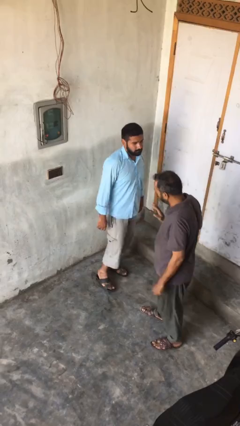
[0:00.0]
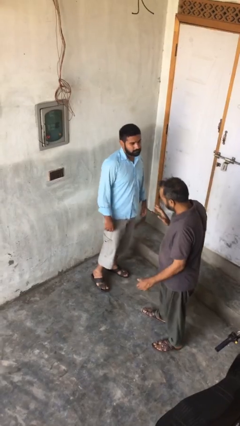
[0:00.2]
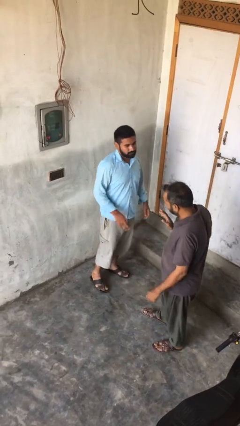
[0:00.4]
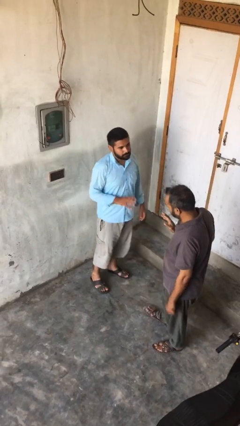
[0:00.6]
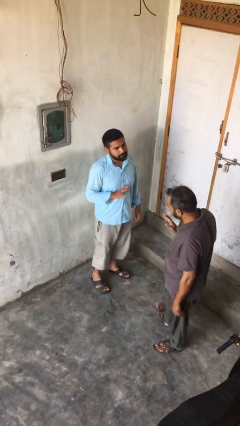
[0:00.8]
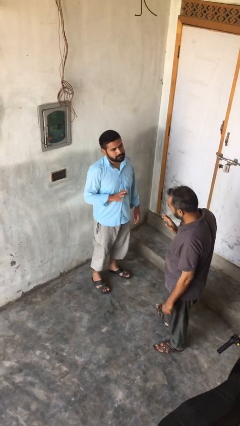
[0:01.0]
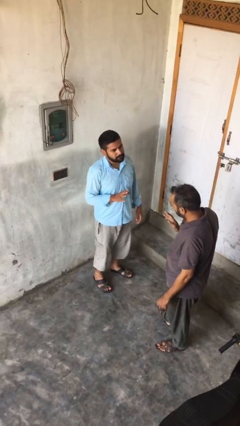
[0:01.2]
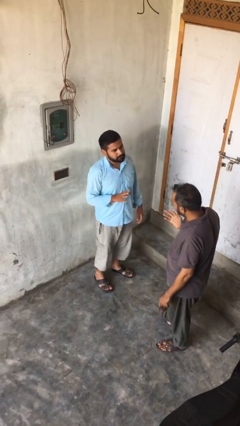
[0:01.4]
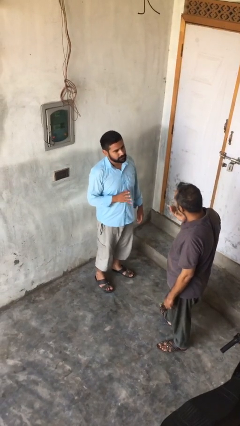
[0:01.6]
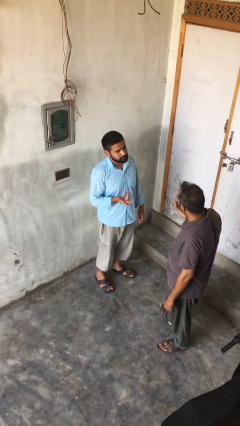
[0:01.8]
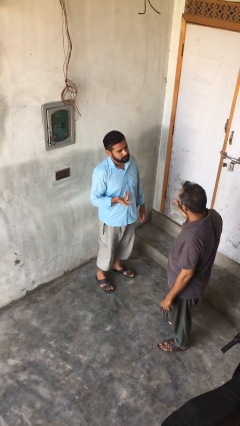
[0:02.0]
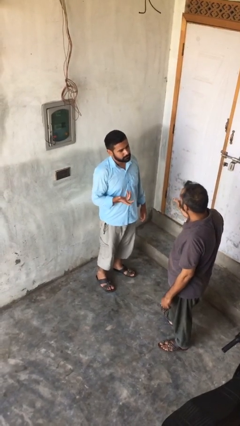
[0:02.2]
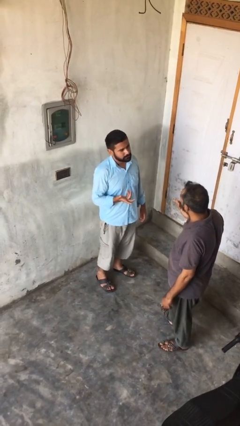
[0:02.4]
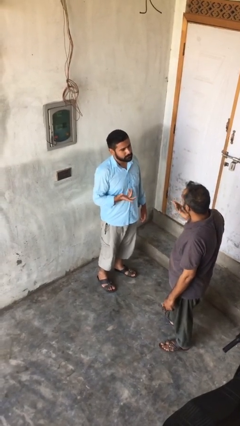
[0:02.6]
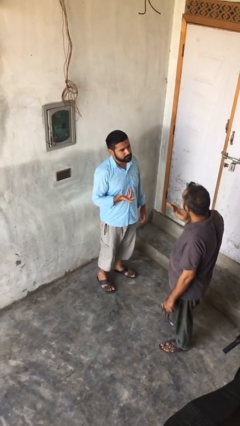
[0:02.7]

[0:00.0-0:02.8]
person talks to person

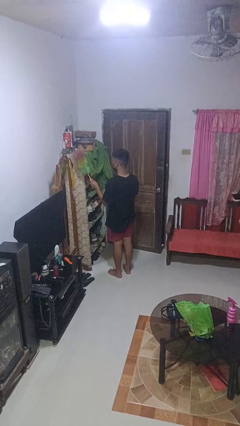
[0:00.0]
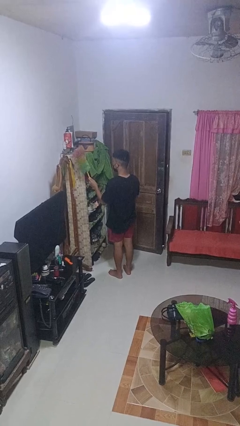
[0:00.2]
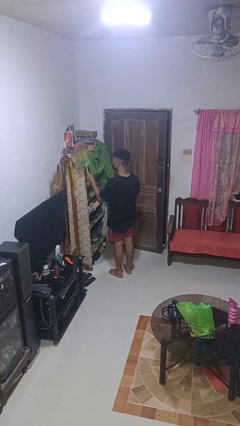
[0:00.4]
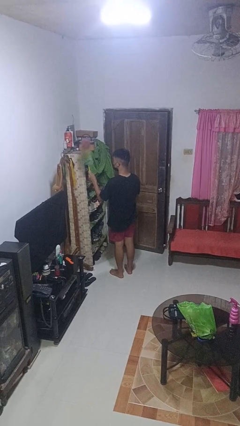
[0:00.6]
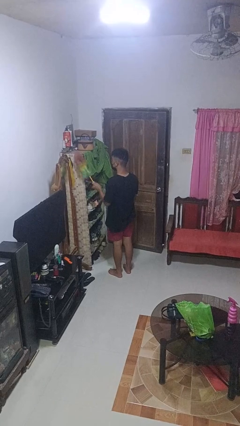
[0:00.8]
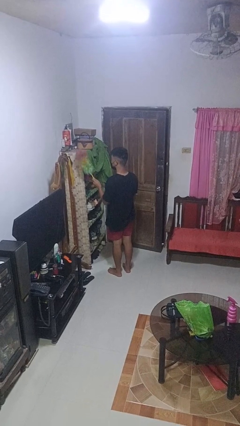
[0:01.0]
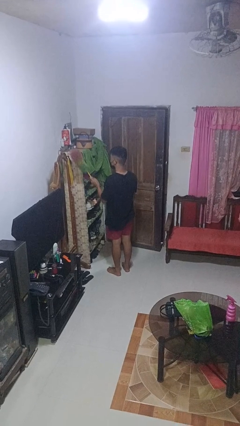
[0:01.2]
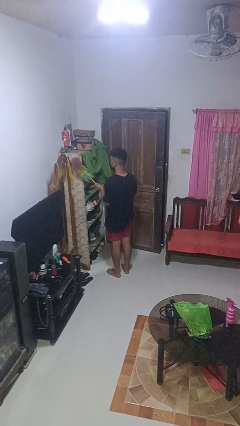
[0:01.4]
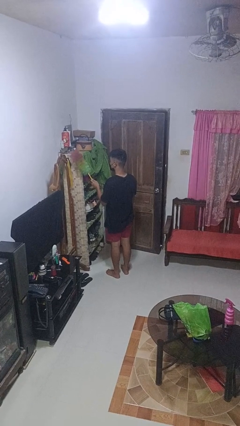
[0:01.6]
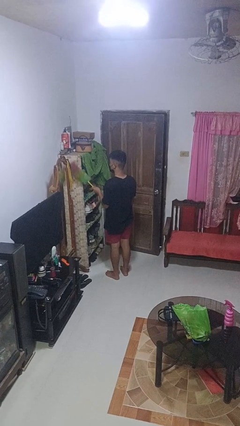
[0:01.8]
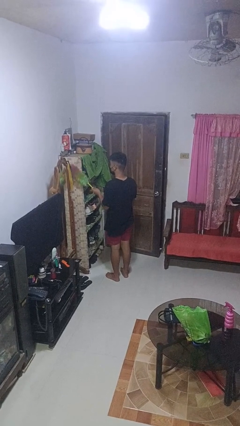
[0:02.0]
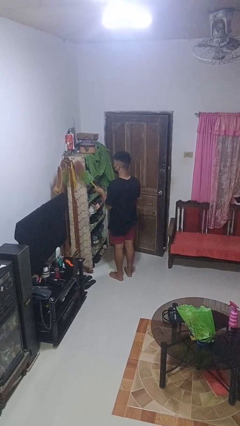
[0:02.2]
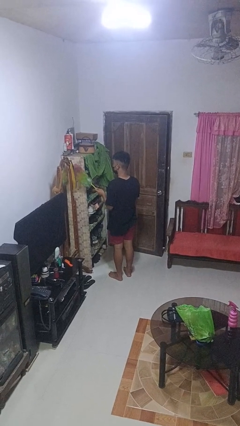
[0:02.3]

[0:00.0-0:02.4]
person dusts furniture

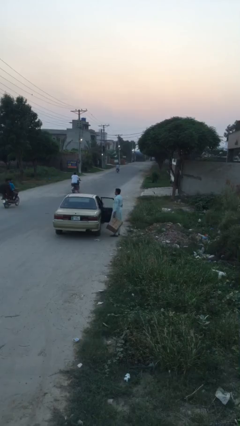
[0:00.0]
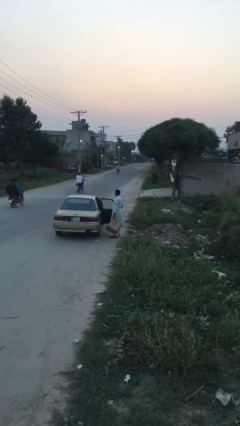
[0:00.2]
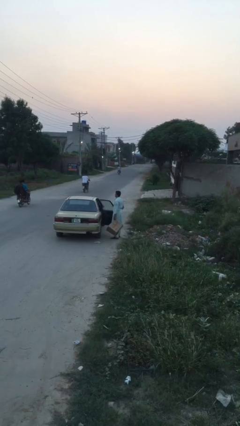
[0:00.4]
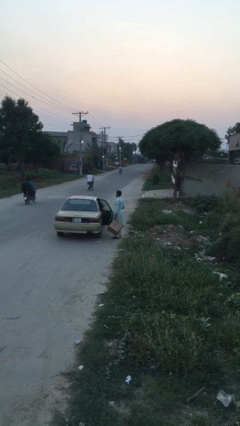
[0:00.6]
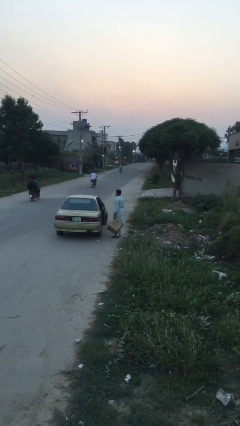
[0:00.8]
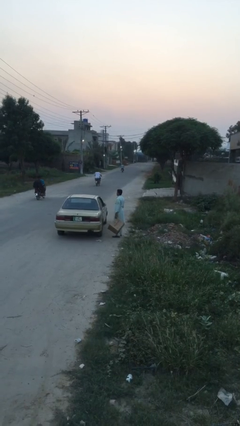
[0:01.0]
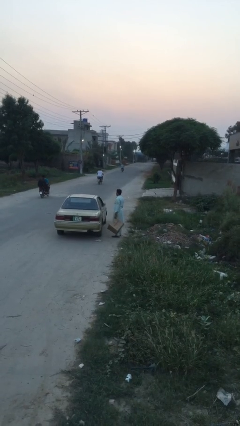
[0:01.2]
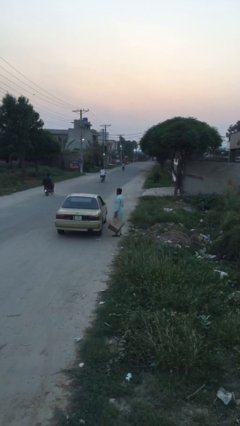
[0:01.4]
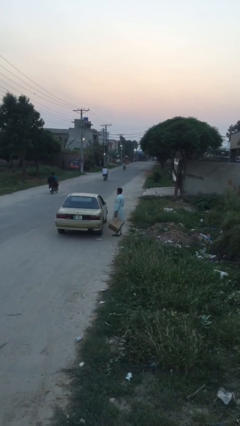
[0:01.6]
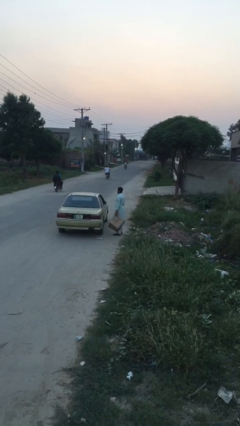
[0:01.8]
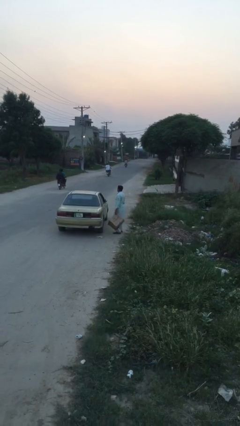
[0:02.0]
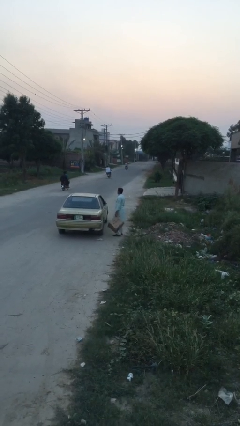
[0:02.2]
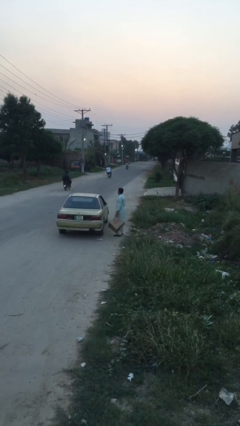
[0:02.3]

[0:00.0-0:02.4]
person closes car door

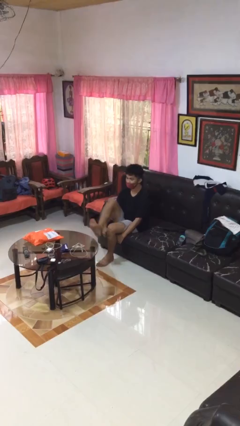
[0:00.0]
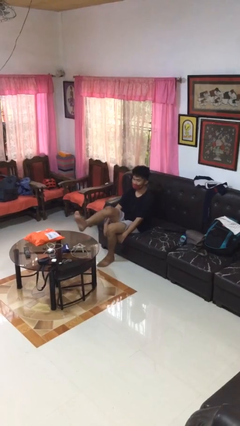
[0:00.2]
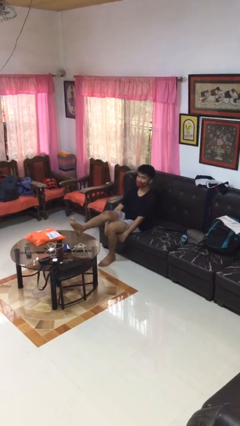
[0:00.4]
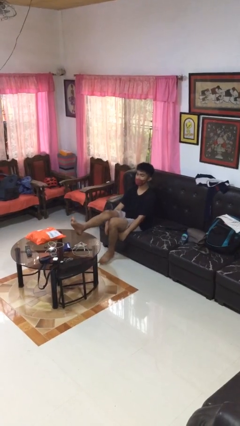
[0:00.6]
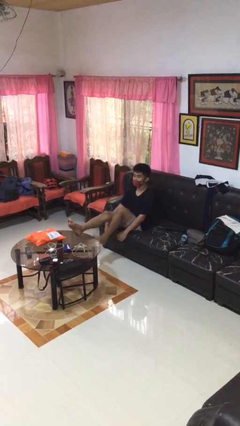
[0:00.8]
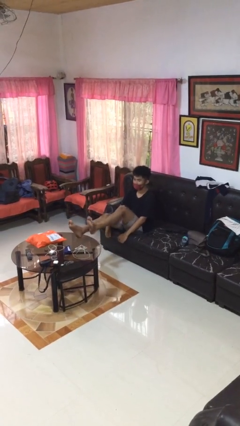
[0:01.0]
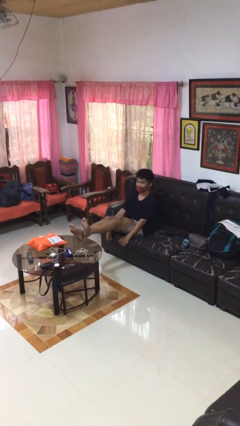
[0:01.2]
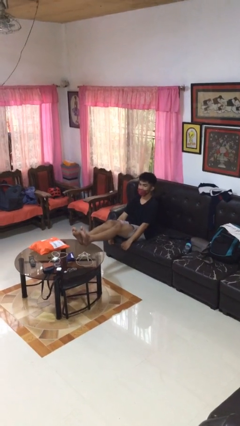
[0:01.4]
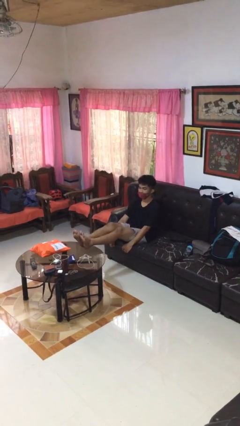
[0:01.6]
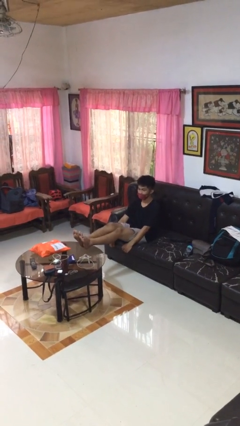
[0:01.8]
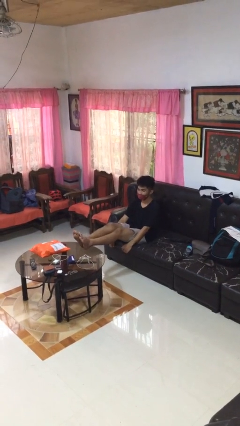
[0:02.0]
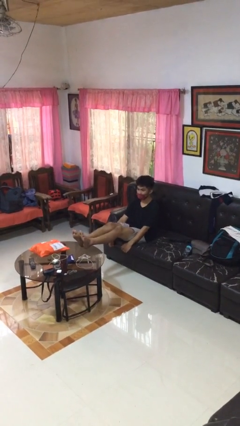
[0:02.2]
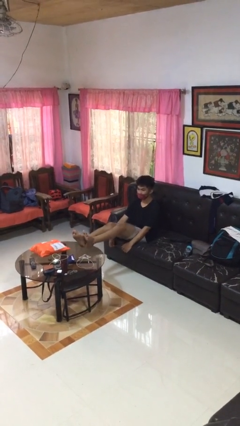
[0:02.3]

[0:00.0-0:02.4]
person puts feet up

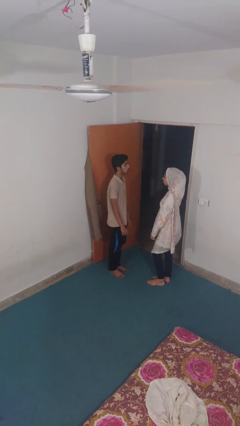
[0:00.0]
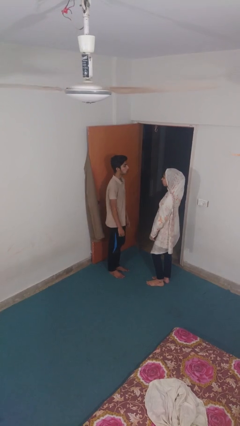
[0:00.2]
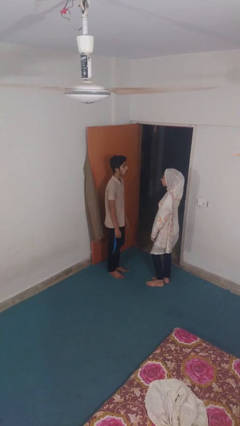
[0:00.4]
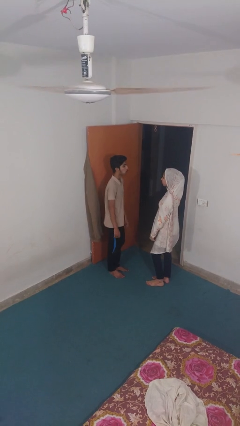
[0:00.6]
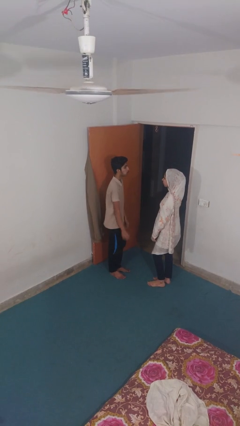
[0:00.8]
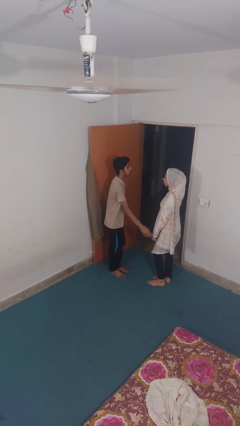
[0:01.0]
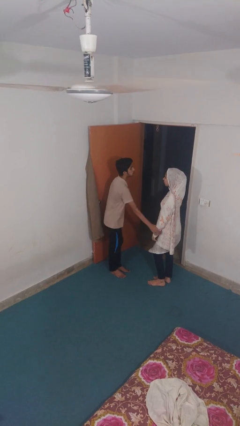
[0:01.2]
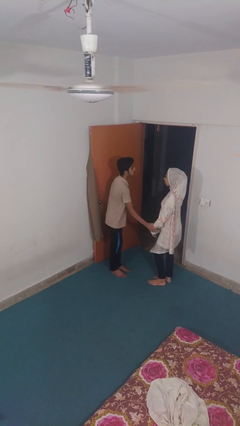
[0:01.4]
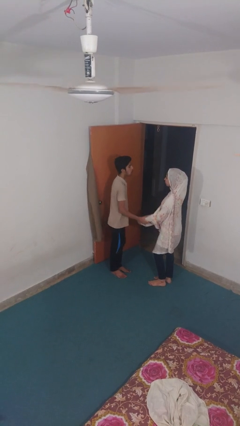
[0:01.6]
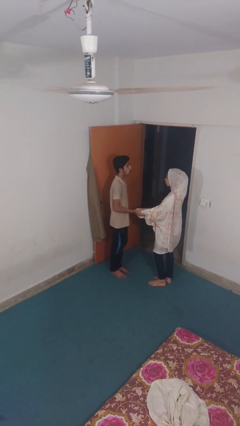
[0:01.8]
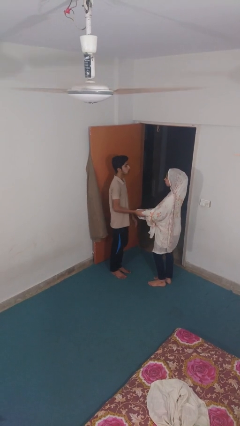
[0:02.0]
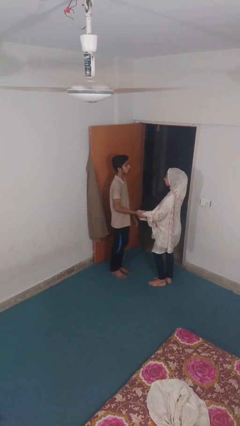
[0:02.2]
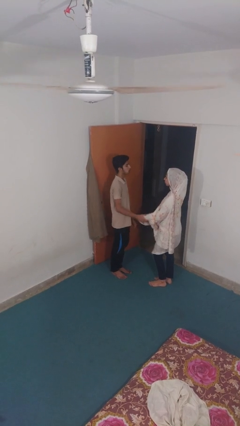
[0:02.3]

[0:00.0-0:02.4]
person grabs person by forearm

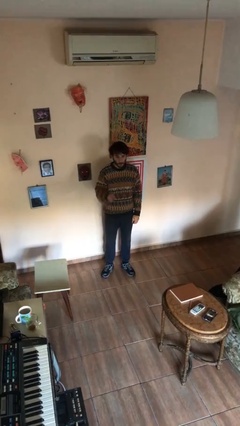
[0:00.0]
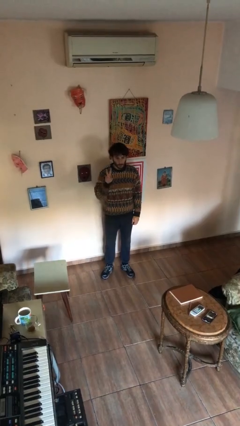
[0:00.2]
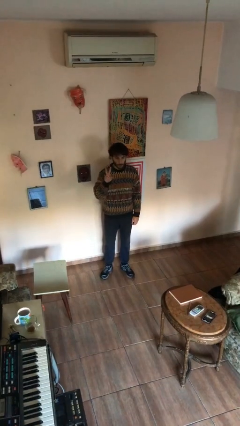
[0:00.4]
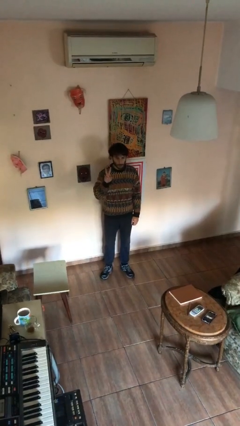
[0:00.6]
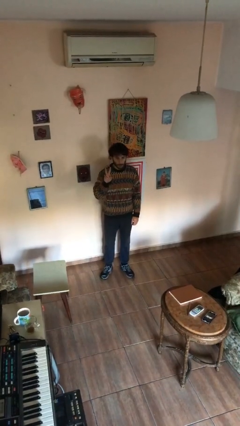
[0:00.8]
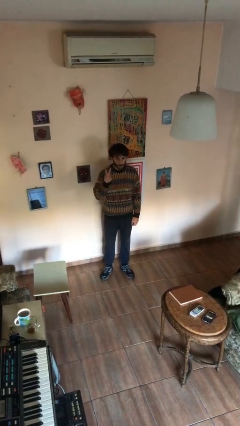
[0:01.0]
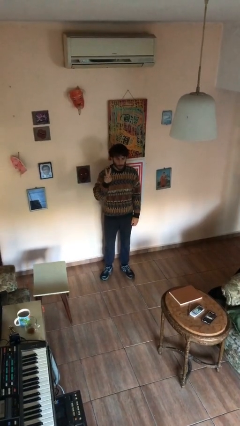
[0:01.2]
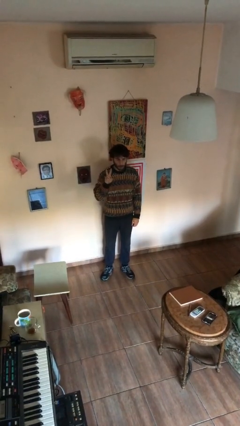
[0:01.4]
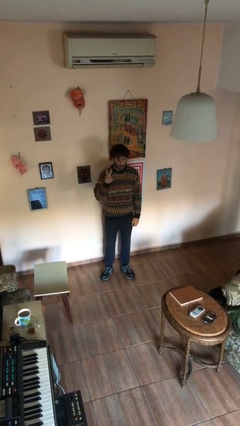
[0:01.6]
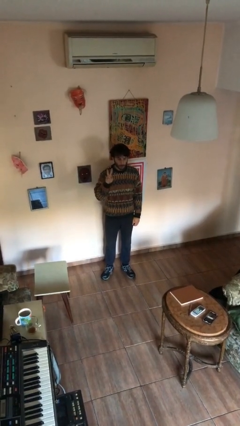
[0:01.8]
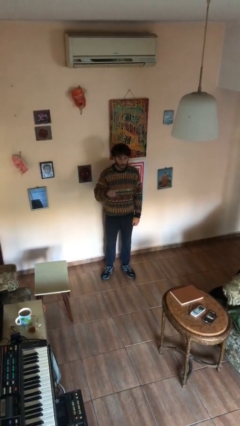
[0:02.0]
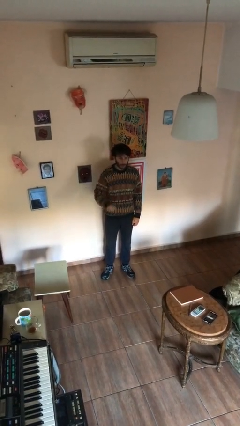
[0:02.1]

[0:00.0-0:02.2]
person gestures peace

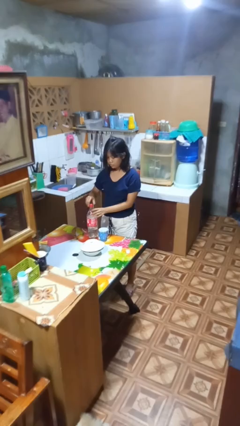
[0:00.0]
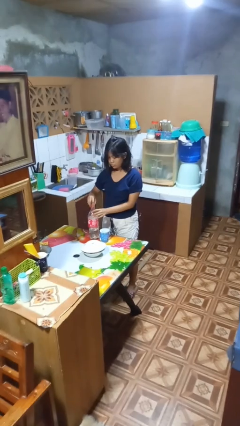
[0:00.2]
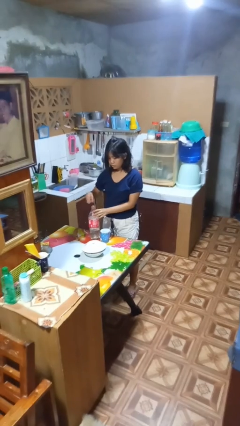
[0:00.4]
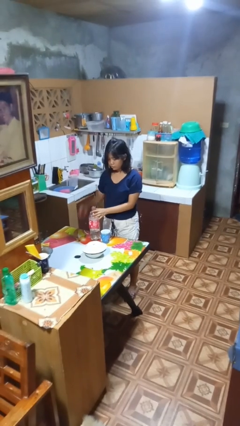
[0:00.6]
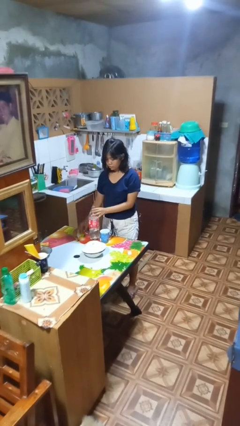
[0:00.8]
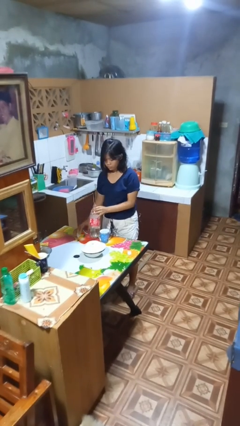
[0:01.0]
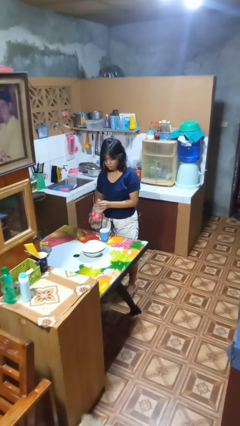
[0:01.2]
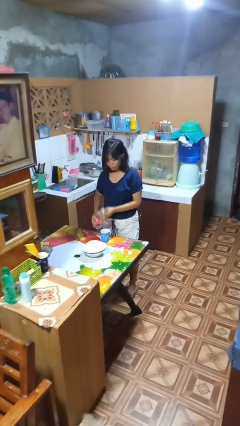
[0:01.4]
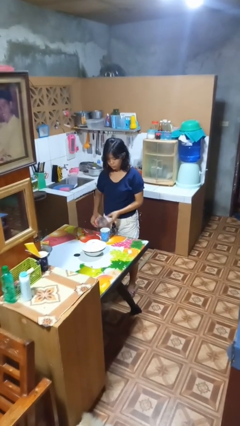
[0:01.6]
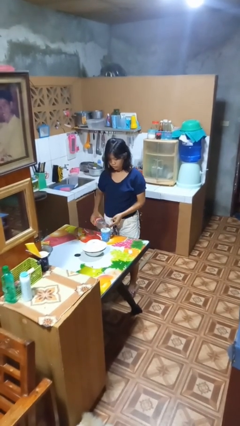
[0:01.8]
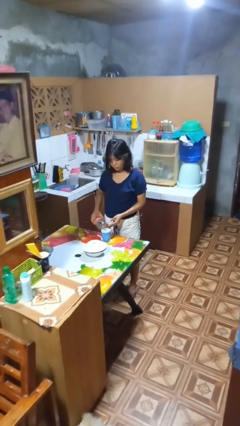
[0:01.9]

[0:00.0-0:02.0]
person unscrews lid from bottle

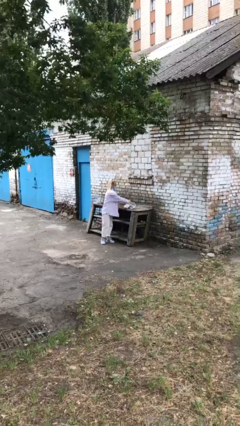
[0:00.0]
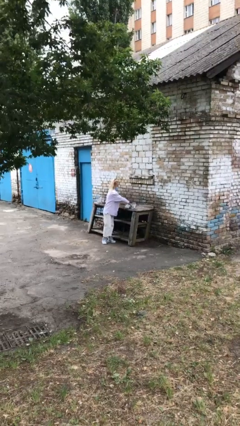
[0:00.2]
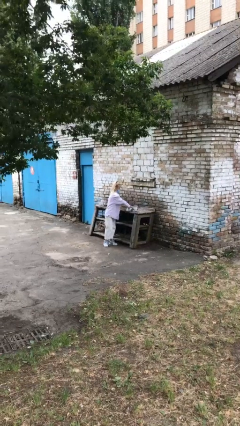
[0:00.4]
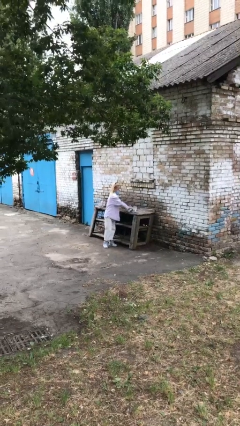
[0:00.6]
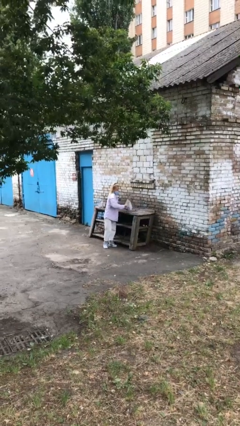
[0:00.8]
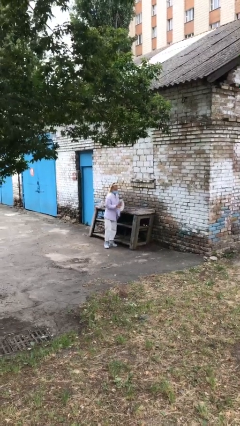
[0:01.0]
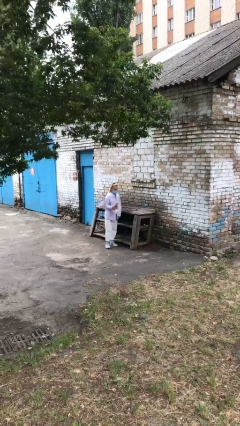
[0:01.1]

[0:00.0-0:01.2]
person picks up object from table
